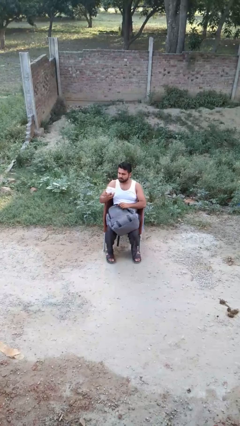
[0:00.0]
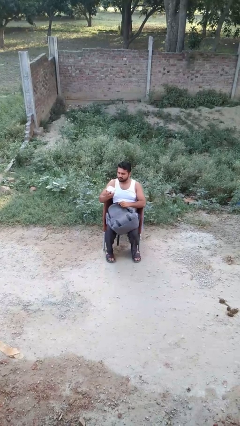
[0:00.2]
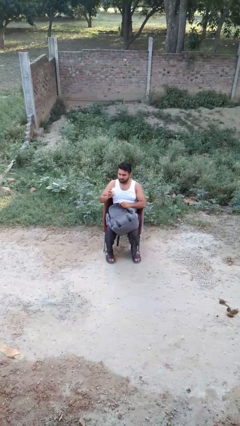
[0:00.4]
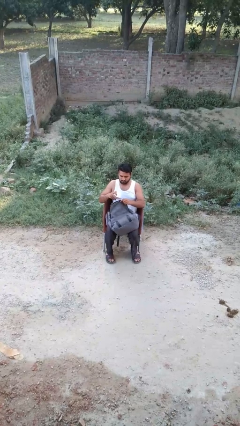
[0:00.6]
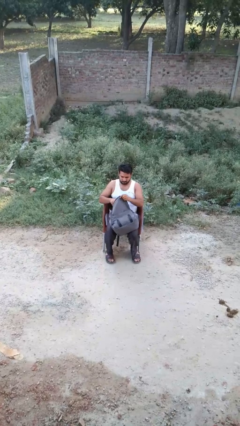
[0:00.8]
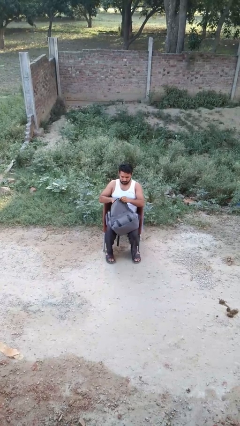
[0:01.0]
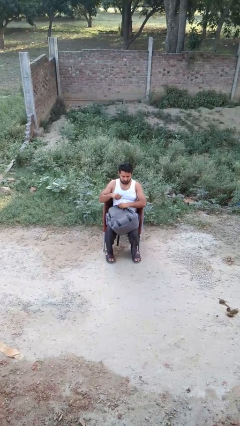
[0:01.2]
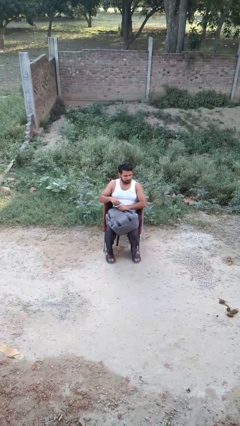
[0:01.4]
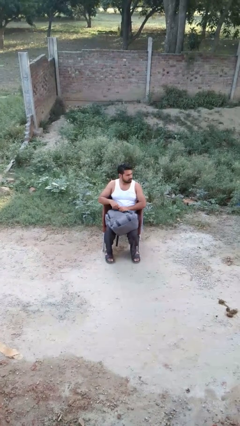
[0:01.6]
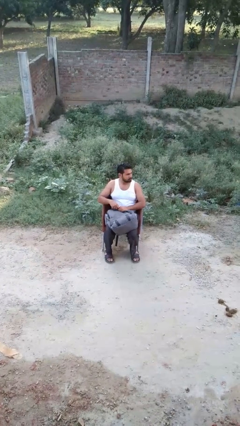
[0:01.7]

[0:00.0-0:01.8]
person puts object into backpack

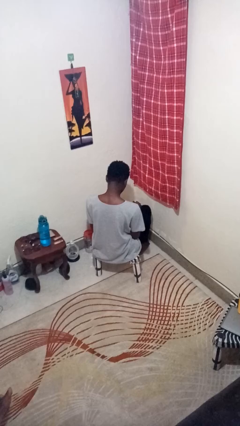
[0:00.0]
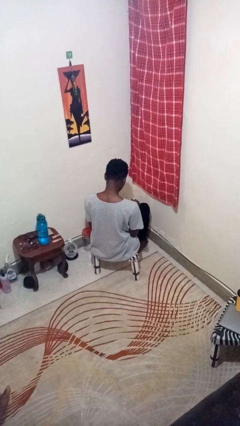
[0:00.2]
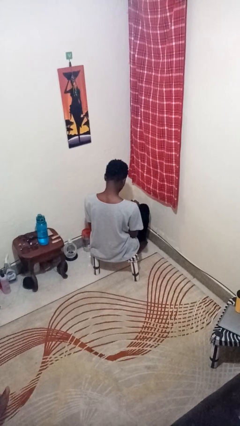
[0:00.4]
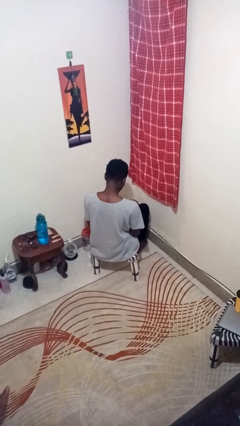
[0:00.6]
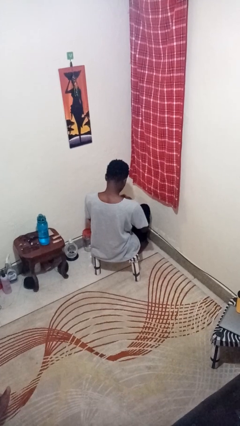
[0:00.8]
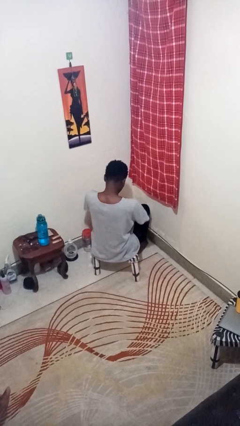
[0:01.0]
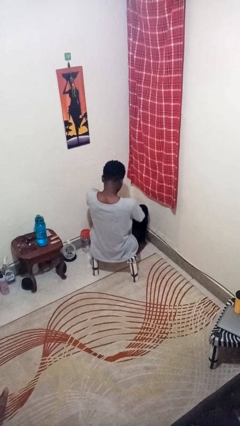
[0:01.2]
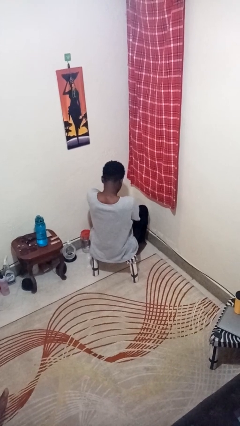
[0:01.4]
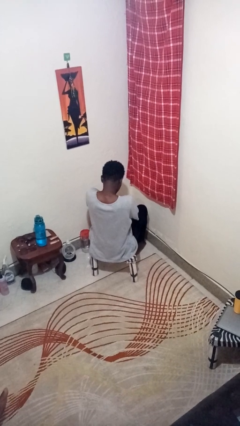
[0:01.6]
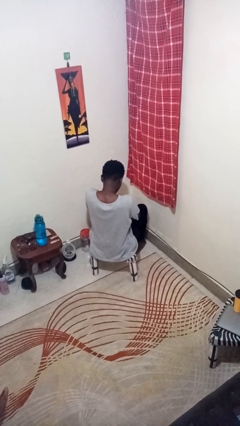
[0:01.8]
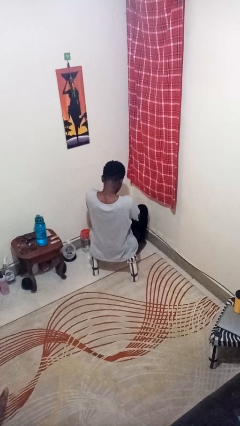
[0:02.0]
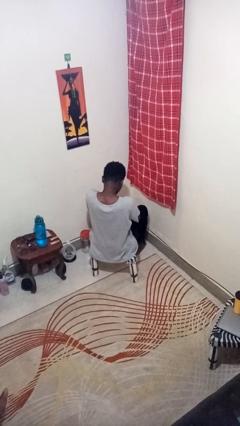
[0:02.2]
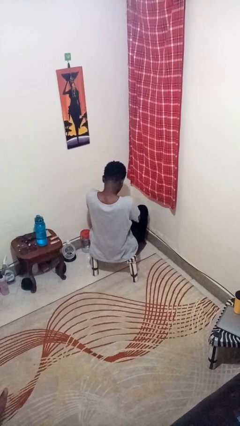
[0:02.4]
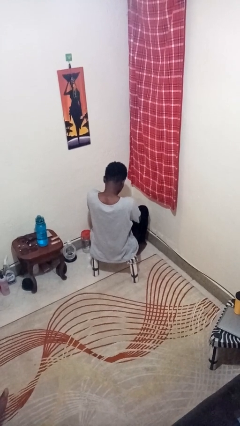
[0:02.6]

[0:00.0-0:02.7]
person crosses arms

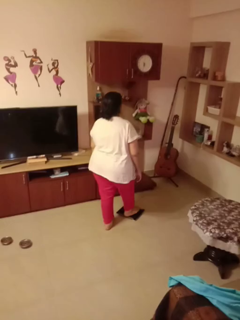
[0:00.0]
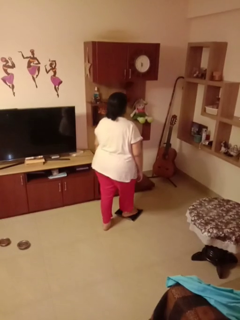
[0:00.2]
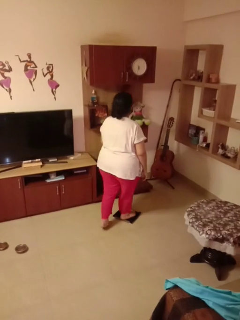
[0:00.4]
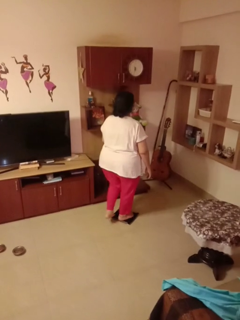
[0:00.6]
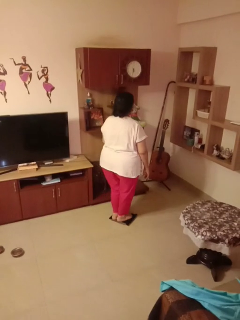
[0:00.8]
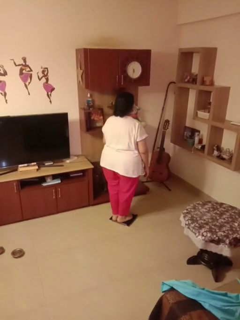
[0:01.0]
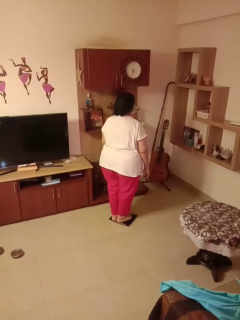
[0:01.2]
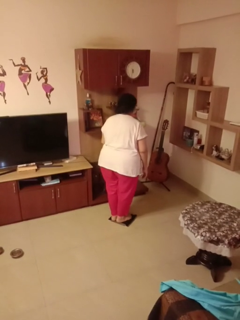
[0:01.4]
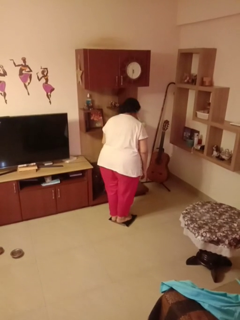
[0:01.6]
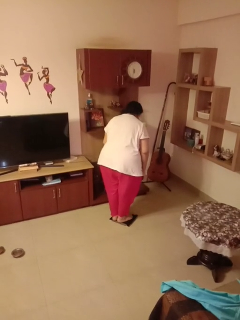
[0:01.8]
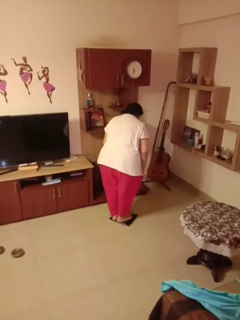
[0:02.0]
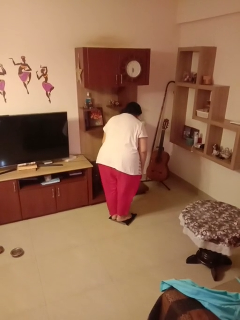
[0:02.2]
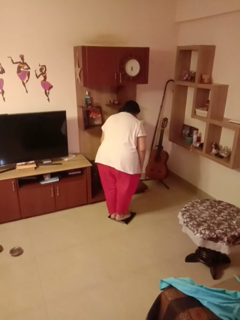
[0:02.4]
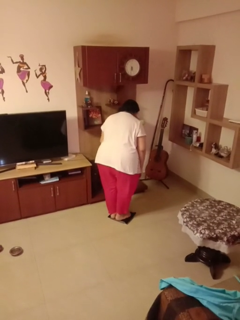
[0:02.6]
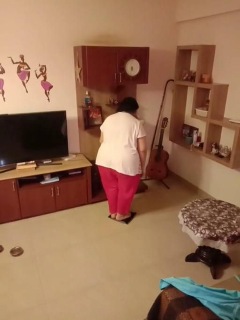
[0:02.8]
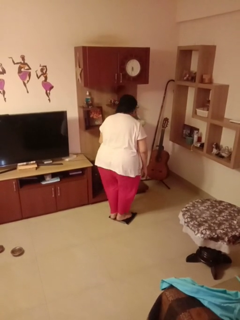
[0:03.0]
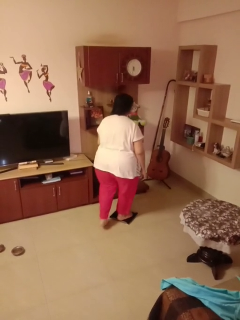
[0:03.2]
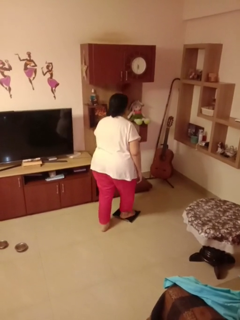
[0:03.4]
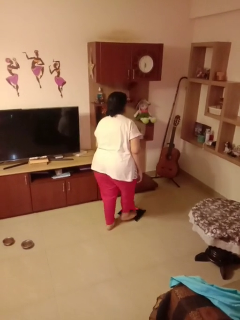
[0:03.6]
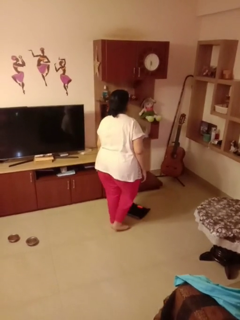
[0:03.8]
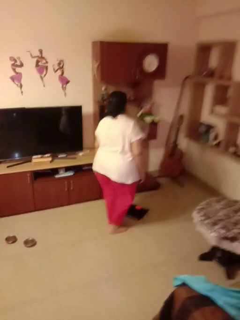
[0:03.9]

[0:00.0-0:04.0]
person uses bodyweight scale

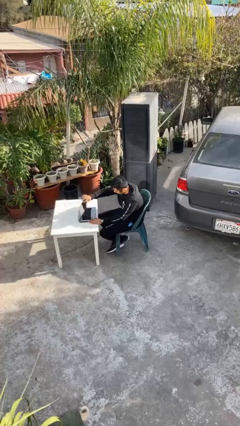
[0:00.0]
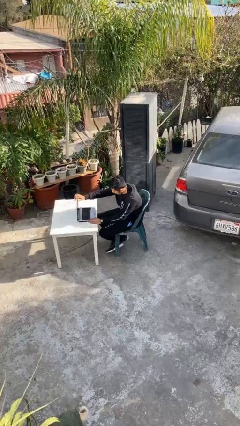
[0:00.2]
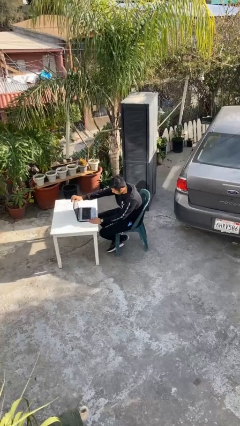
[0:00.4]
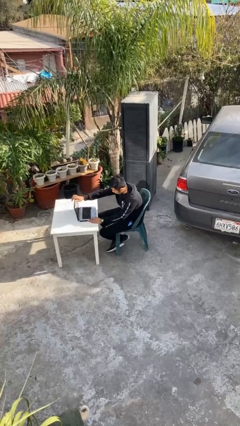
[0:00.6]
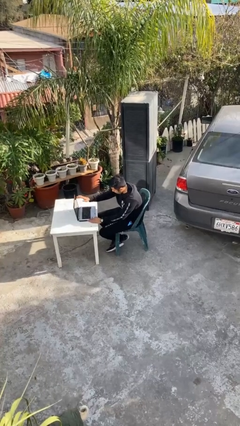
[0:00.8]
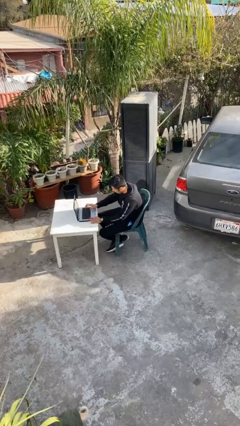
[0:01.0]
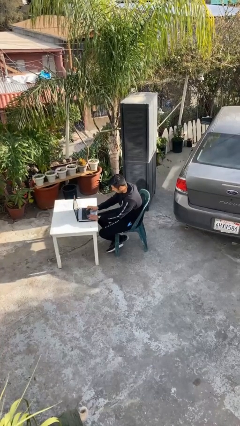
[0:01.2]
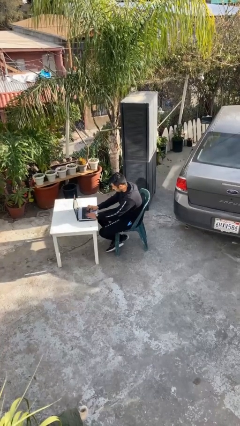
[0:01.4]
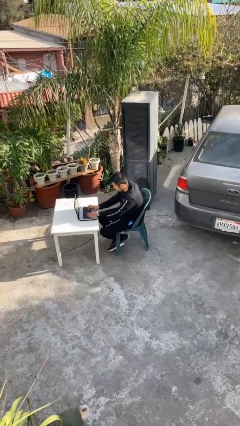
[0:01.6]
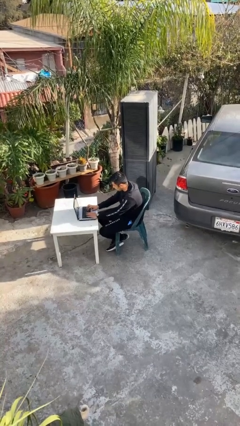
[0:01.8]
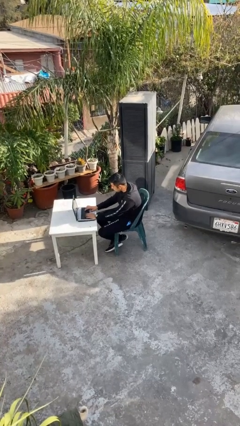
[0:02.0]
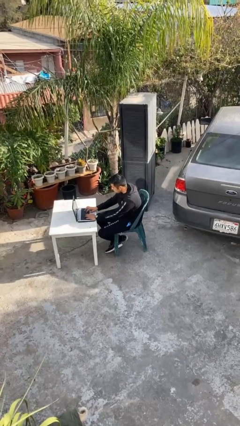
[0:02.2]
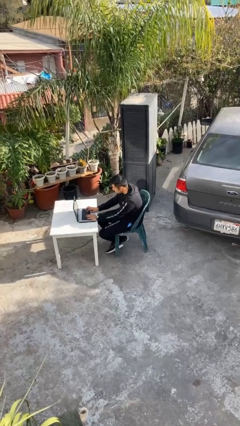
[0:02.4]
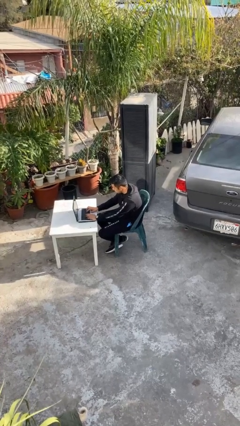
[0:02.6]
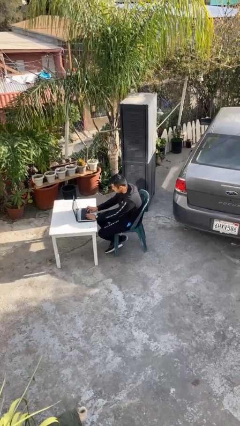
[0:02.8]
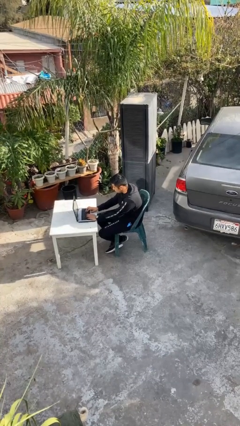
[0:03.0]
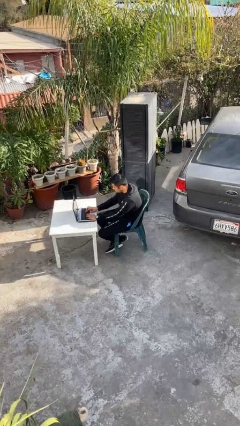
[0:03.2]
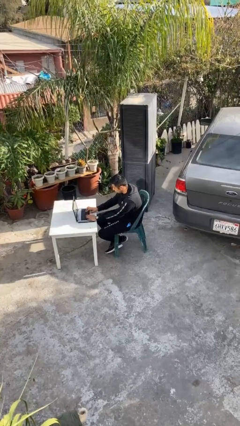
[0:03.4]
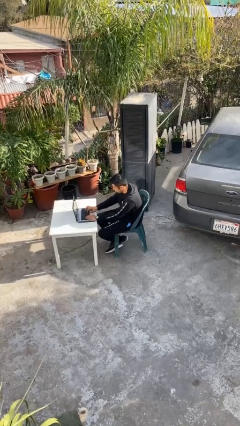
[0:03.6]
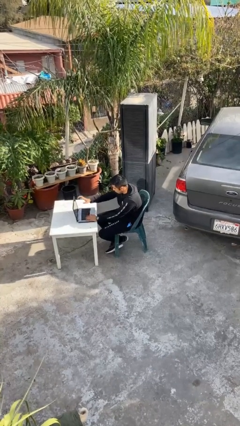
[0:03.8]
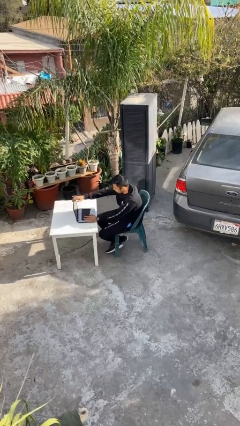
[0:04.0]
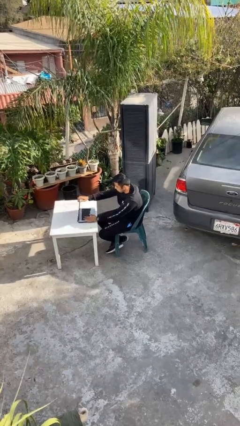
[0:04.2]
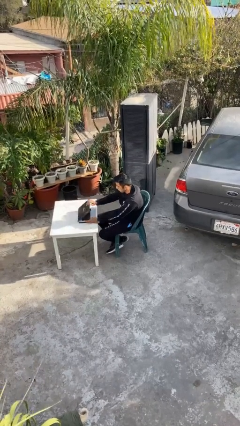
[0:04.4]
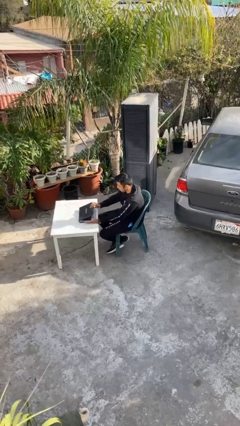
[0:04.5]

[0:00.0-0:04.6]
person interacts with laptop

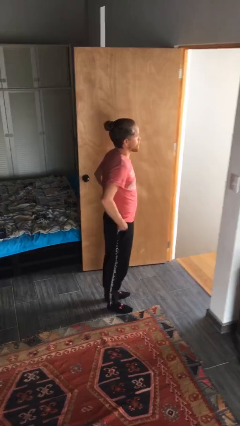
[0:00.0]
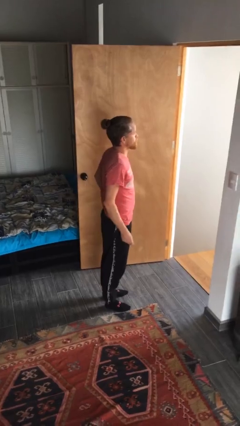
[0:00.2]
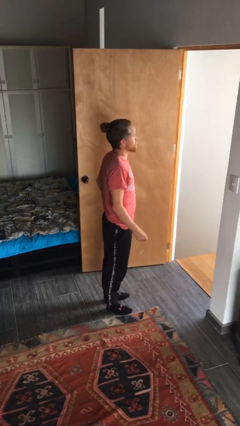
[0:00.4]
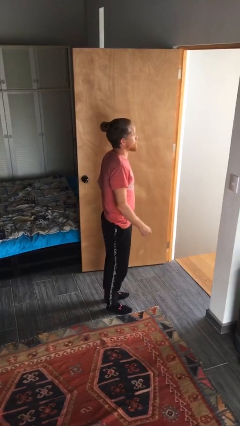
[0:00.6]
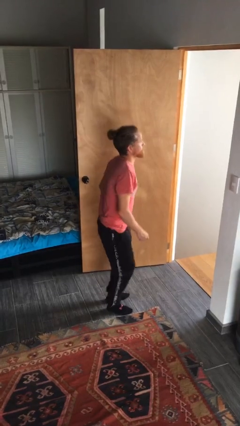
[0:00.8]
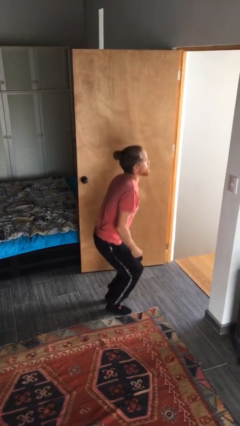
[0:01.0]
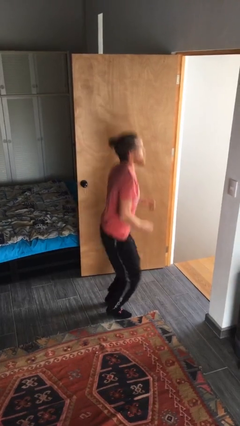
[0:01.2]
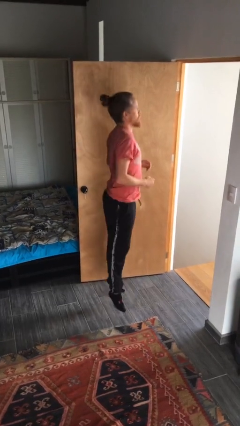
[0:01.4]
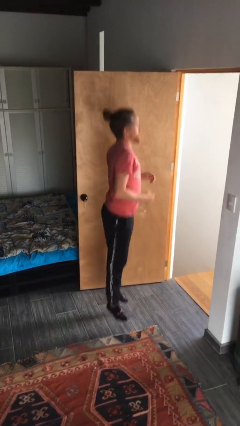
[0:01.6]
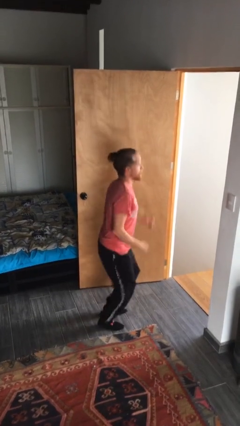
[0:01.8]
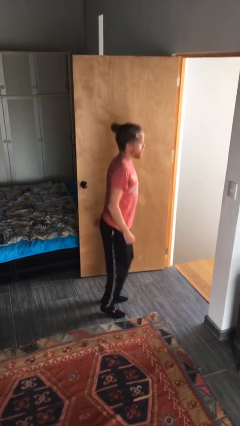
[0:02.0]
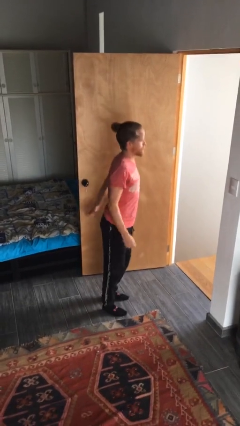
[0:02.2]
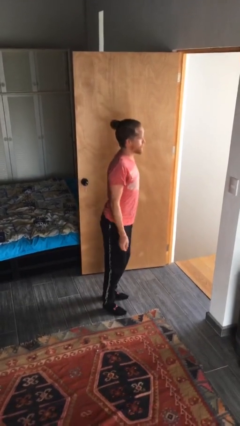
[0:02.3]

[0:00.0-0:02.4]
person jumps

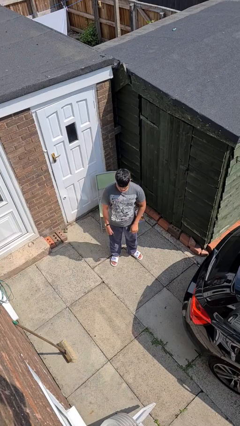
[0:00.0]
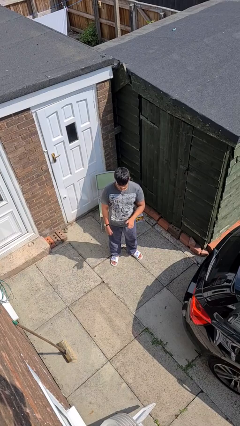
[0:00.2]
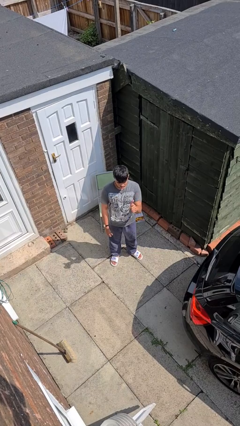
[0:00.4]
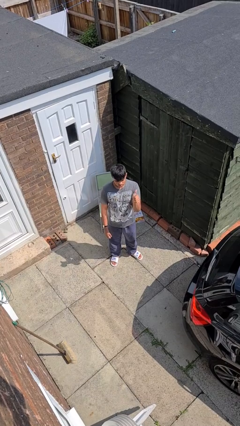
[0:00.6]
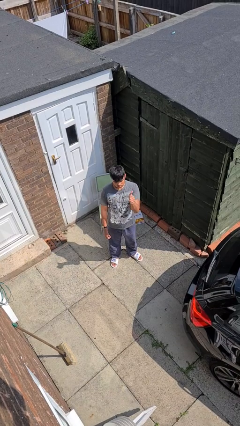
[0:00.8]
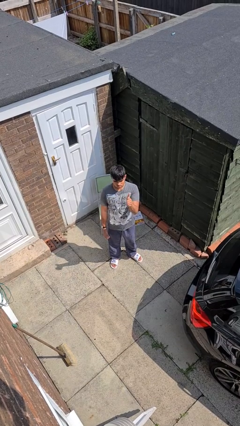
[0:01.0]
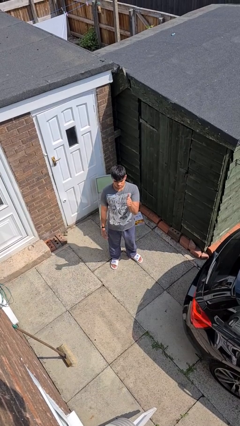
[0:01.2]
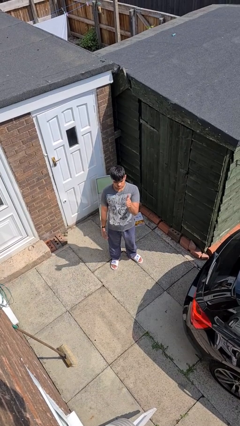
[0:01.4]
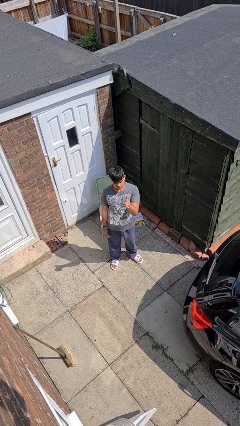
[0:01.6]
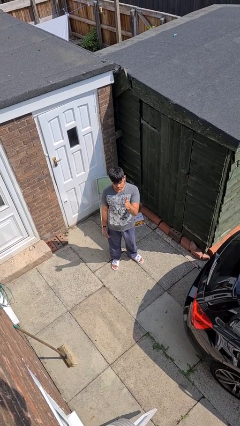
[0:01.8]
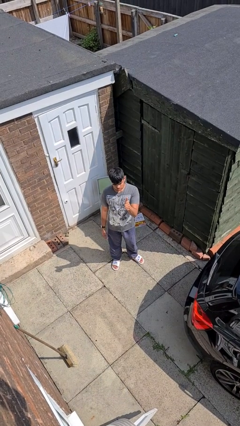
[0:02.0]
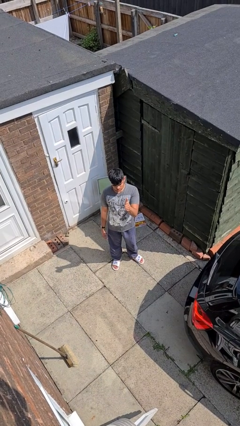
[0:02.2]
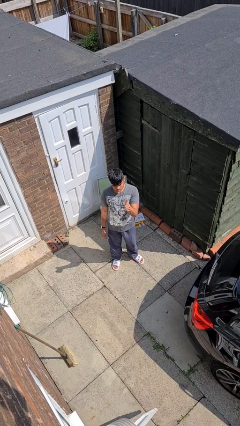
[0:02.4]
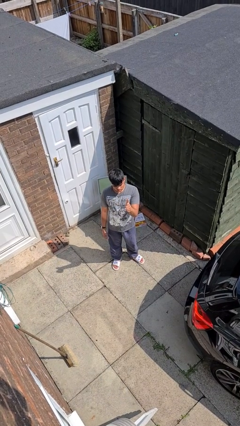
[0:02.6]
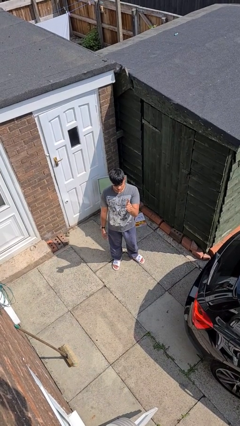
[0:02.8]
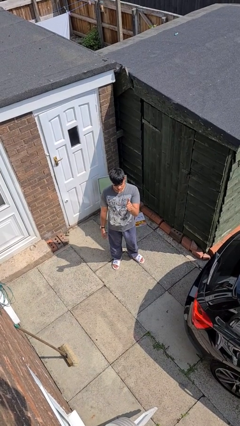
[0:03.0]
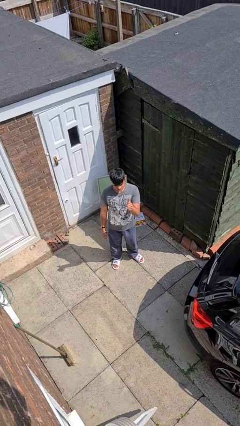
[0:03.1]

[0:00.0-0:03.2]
person gestures thumbs up
